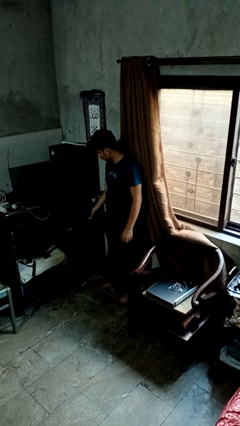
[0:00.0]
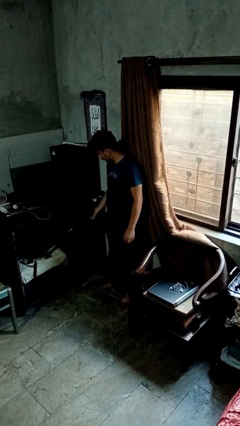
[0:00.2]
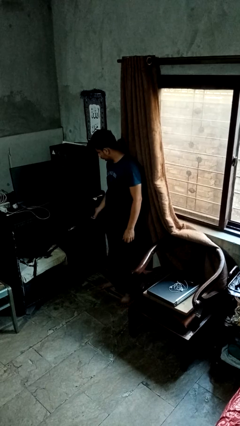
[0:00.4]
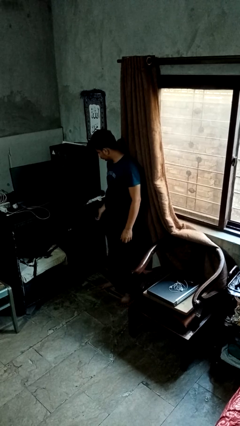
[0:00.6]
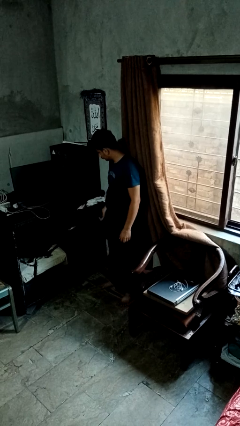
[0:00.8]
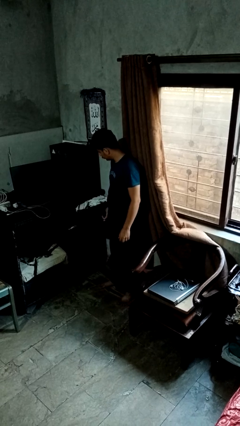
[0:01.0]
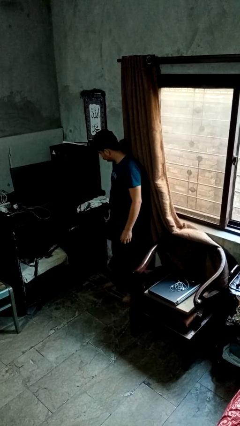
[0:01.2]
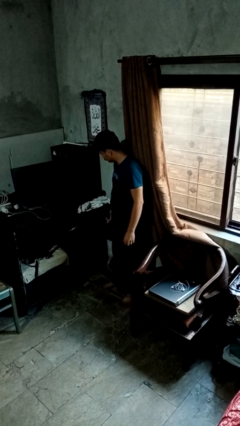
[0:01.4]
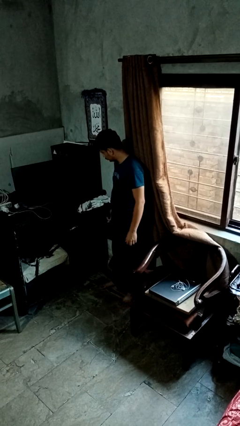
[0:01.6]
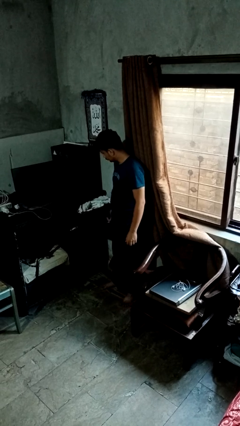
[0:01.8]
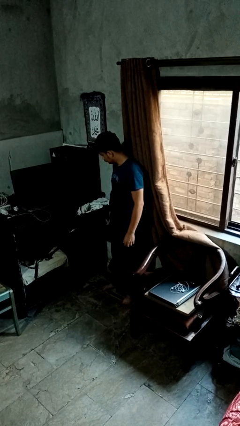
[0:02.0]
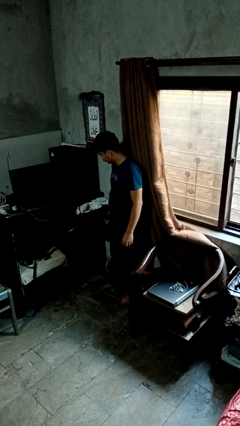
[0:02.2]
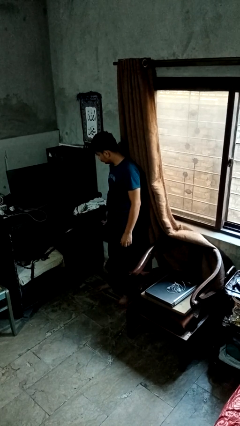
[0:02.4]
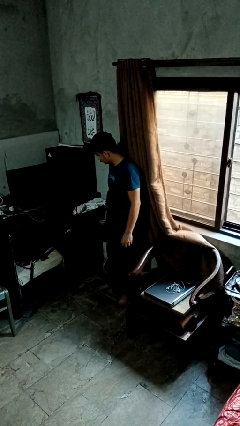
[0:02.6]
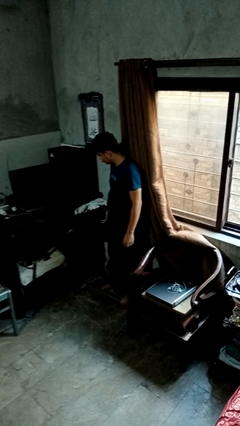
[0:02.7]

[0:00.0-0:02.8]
person opens dresser drawer

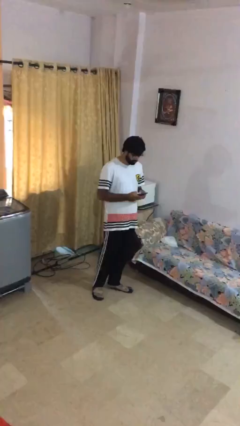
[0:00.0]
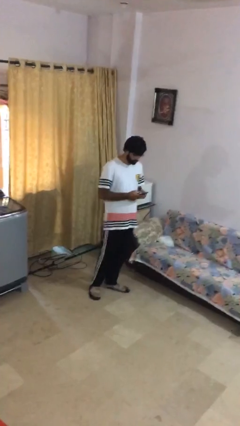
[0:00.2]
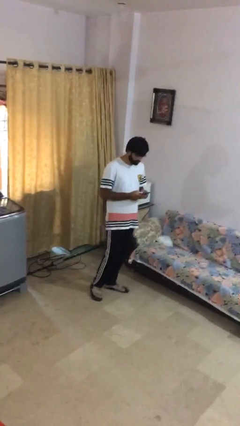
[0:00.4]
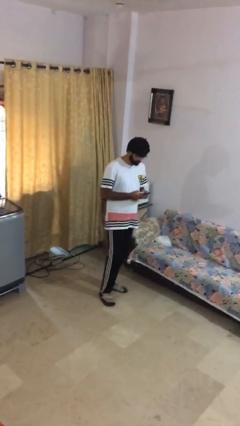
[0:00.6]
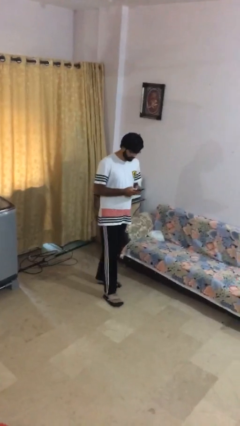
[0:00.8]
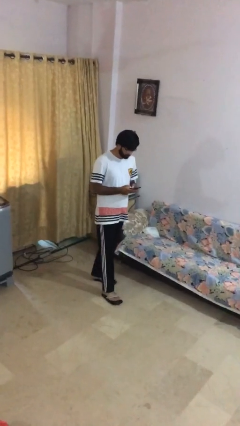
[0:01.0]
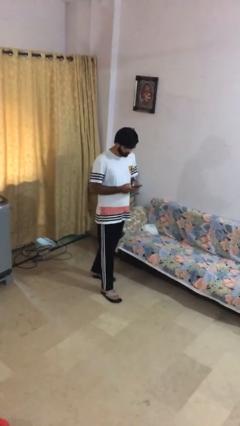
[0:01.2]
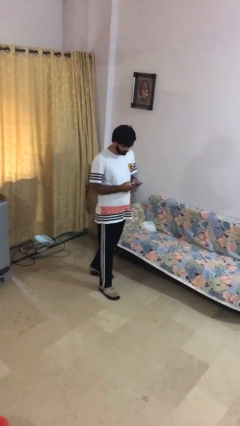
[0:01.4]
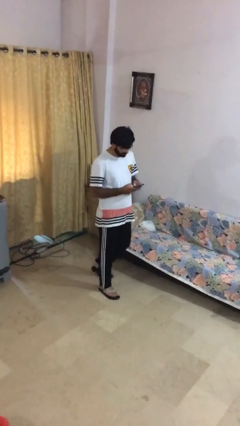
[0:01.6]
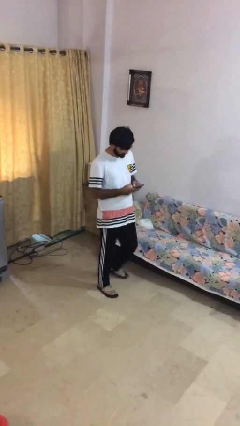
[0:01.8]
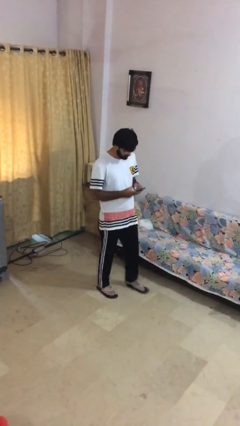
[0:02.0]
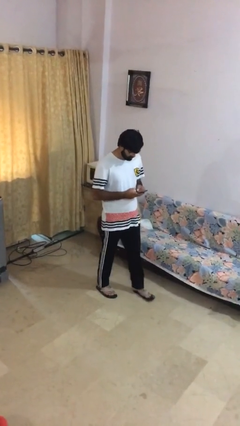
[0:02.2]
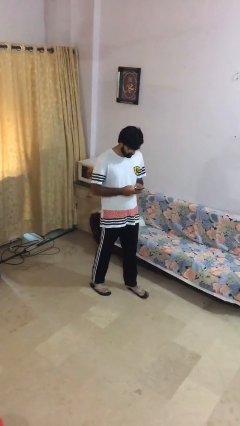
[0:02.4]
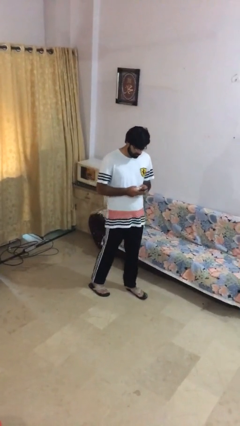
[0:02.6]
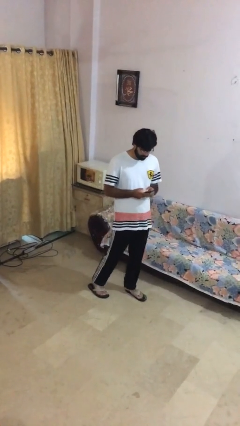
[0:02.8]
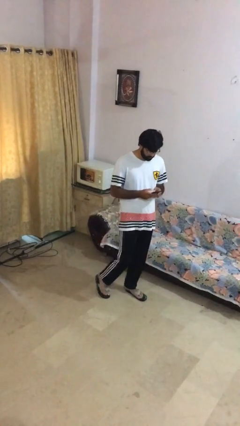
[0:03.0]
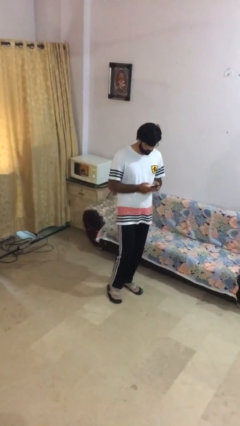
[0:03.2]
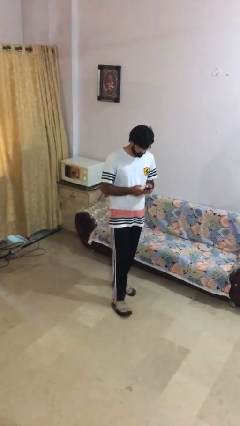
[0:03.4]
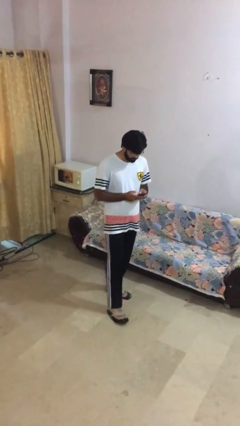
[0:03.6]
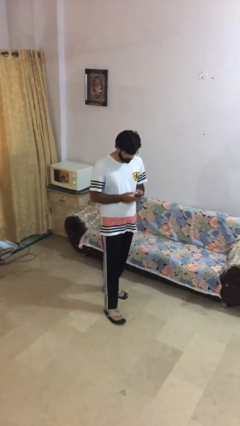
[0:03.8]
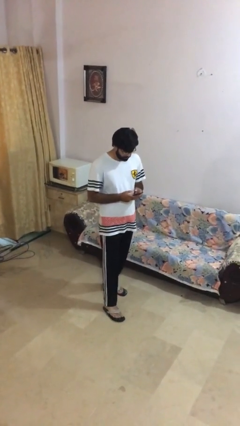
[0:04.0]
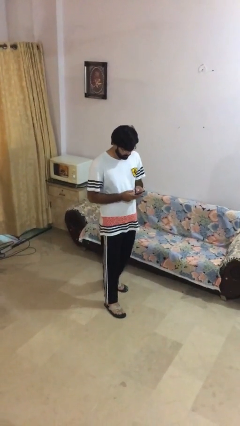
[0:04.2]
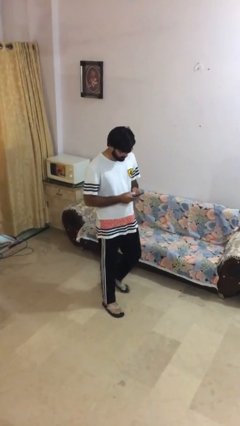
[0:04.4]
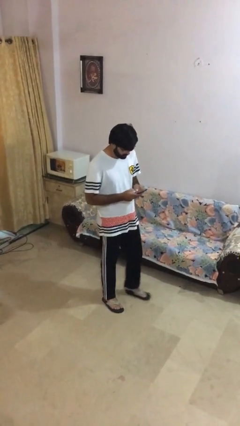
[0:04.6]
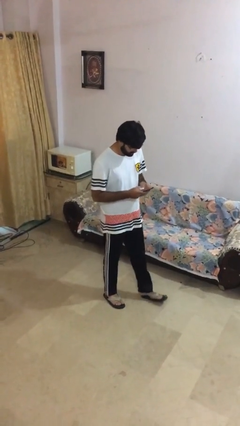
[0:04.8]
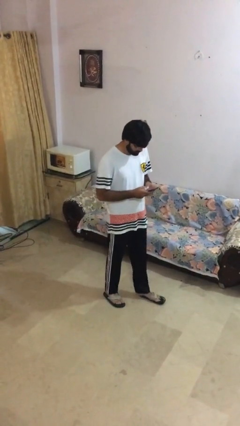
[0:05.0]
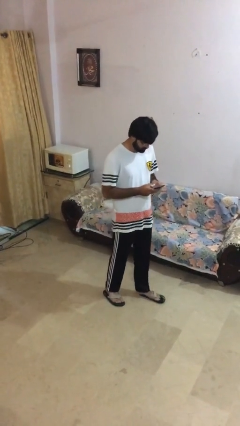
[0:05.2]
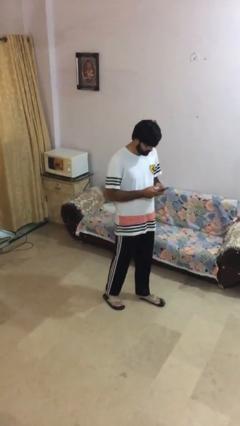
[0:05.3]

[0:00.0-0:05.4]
person texts on phone

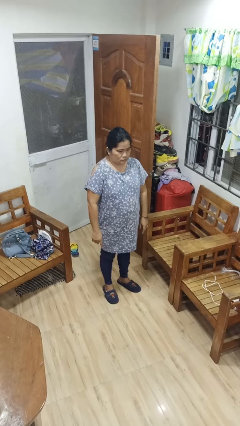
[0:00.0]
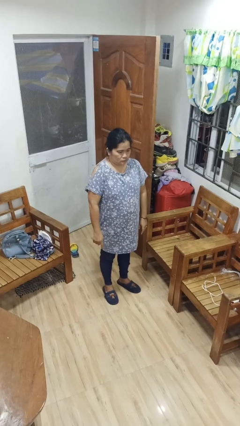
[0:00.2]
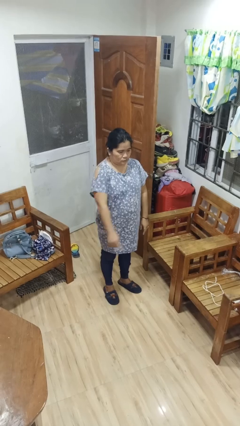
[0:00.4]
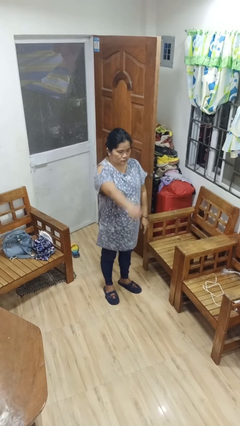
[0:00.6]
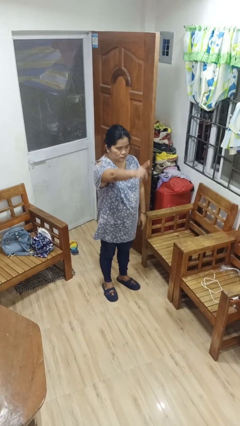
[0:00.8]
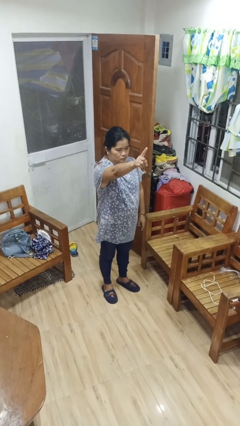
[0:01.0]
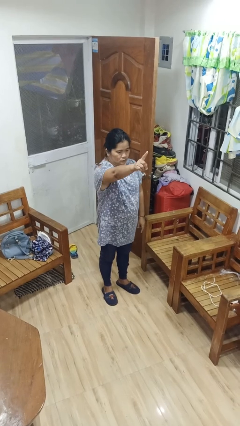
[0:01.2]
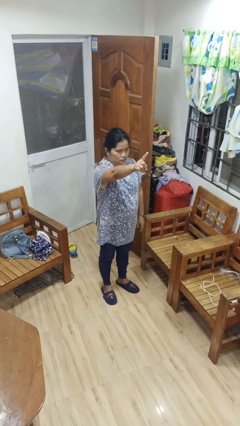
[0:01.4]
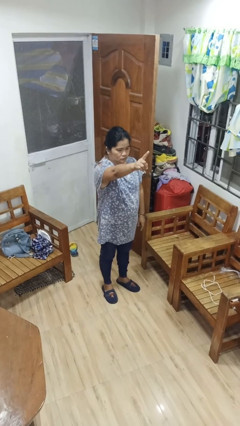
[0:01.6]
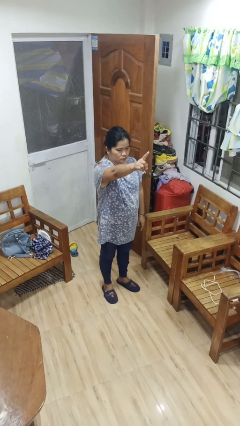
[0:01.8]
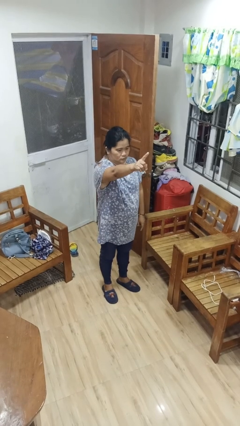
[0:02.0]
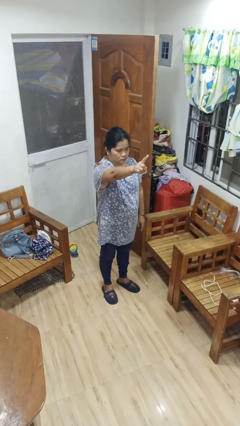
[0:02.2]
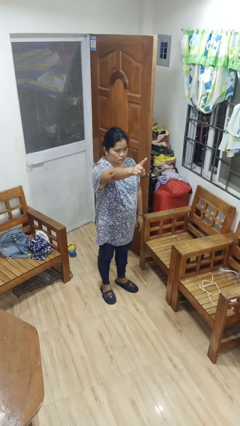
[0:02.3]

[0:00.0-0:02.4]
person gestures number one

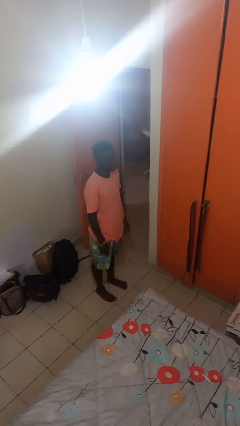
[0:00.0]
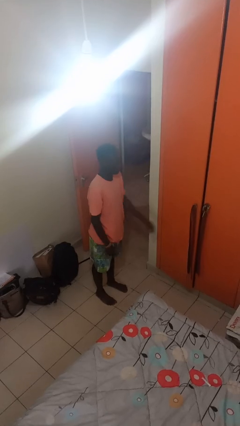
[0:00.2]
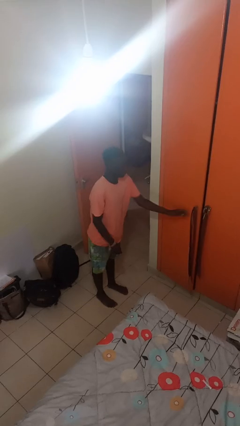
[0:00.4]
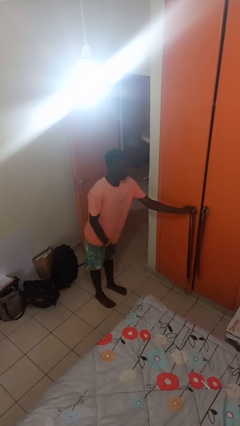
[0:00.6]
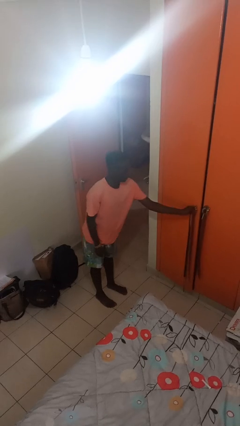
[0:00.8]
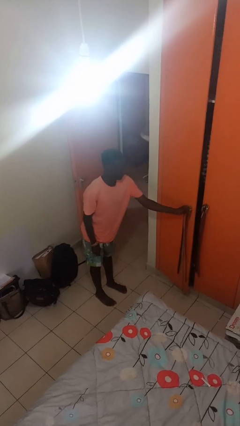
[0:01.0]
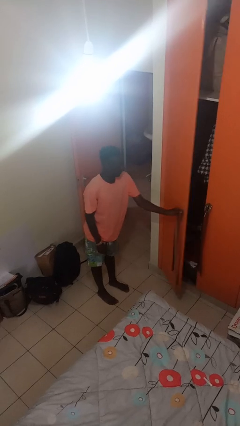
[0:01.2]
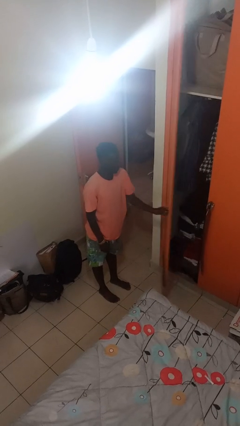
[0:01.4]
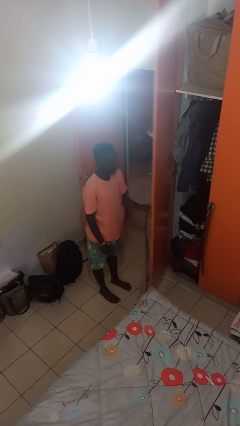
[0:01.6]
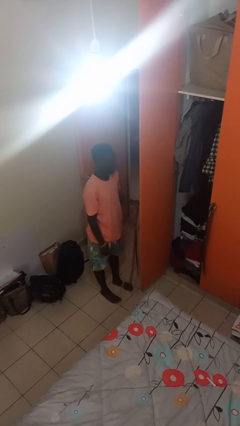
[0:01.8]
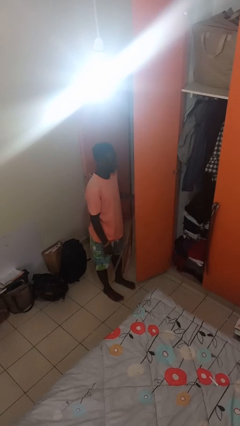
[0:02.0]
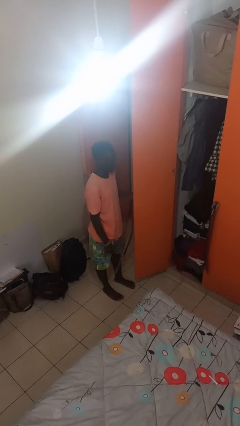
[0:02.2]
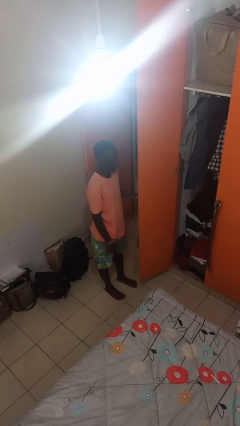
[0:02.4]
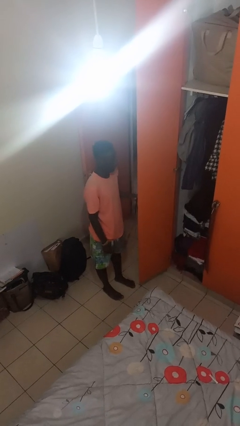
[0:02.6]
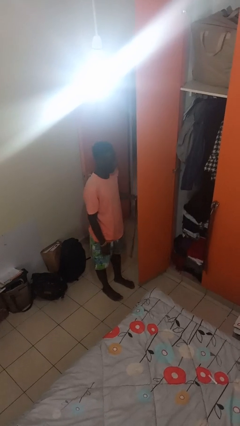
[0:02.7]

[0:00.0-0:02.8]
person opens closet door

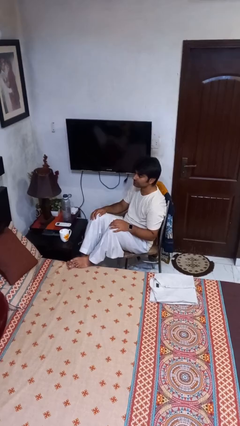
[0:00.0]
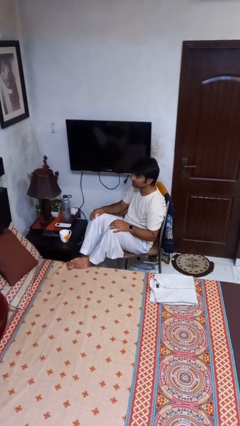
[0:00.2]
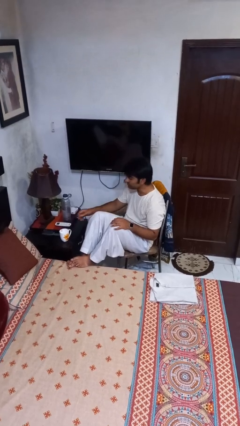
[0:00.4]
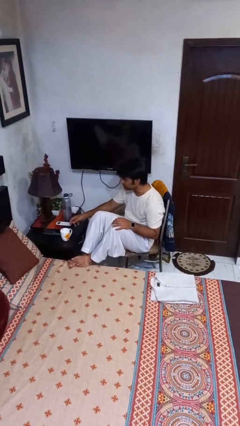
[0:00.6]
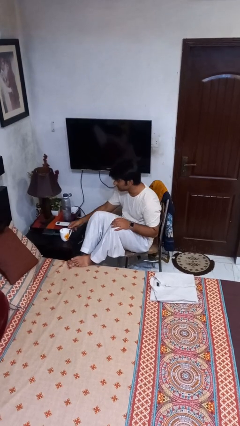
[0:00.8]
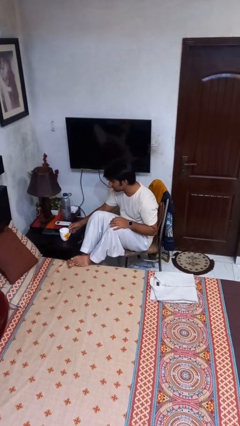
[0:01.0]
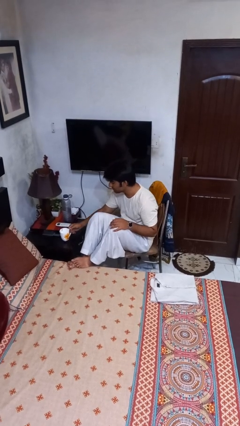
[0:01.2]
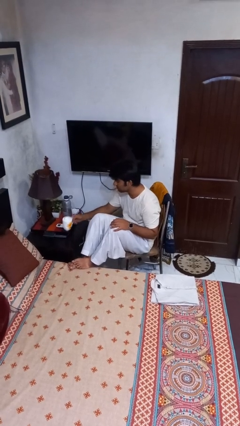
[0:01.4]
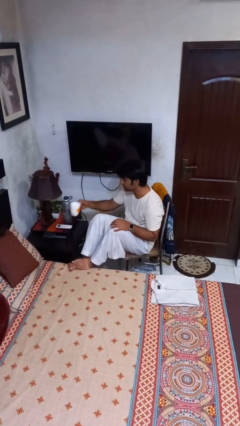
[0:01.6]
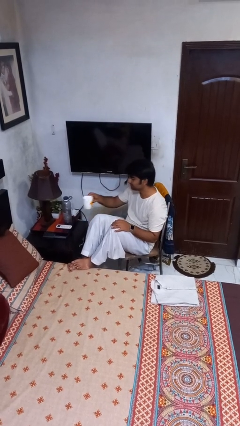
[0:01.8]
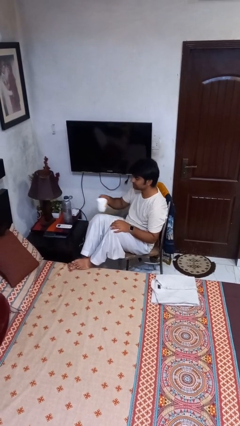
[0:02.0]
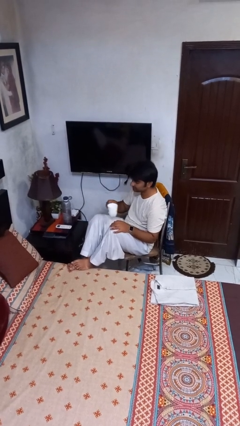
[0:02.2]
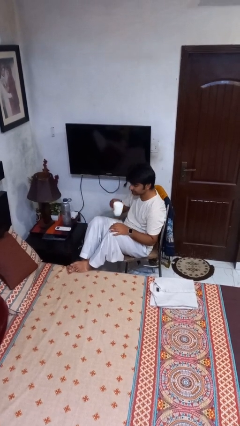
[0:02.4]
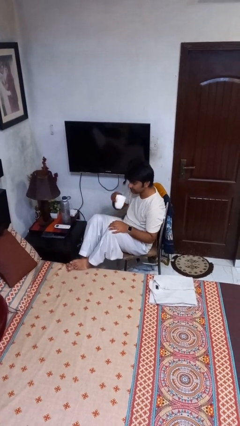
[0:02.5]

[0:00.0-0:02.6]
person picks up object from table

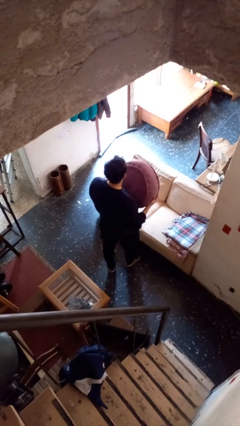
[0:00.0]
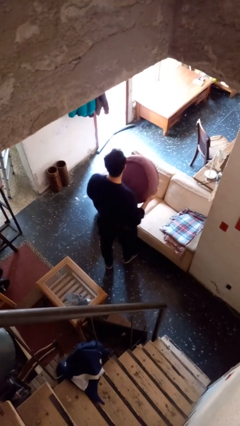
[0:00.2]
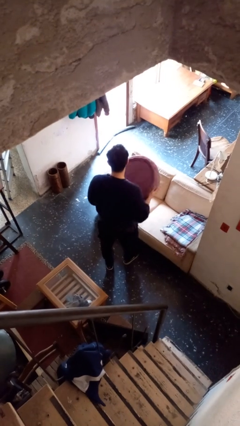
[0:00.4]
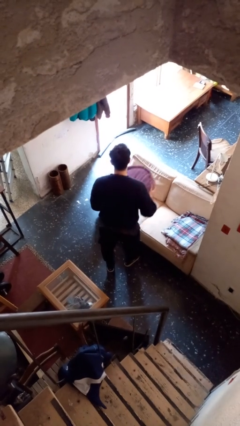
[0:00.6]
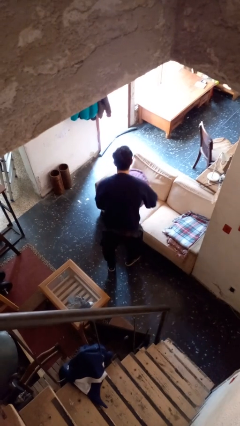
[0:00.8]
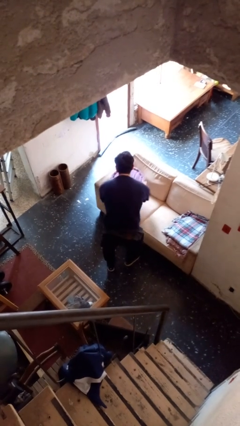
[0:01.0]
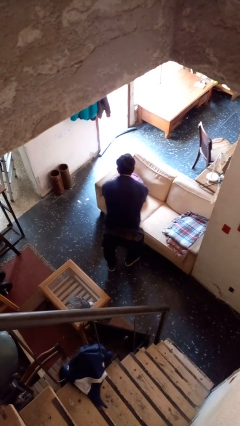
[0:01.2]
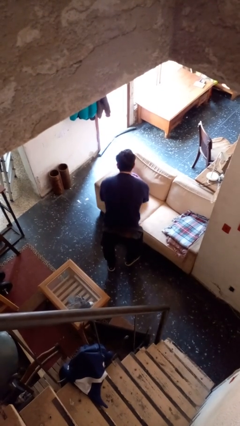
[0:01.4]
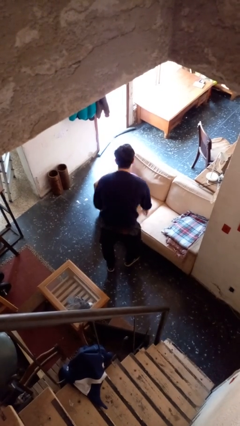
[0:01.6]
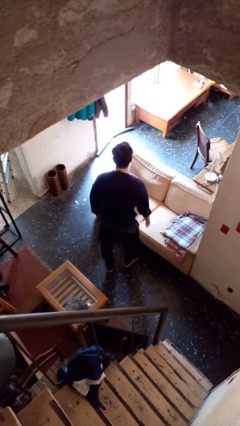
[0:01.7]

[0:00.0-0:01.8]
person puts down object on couch
